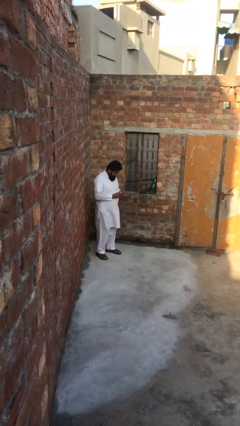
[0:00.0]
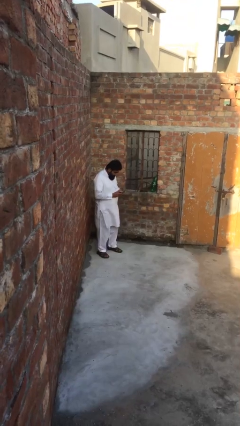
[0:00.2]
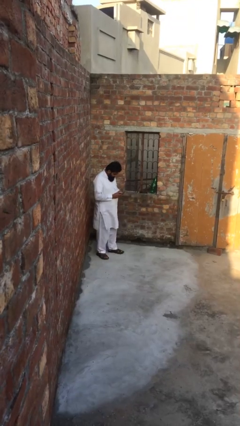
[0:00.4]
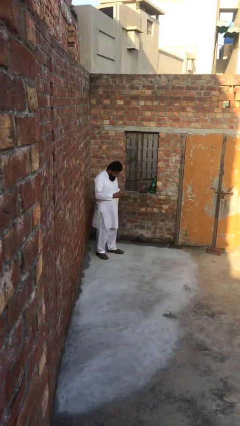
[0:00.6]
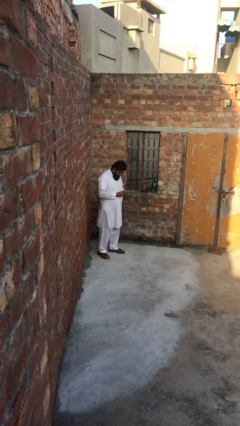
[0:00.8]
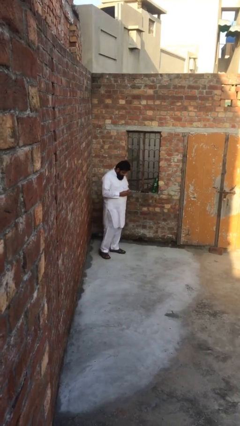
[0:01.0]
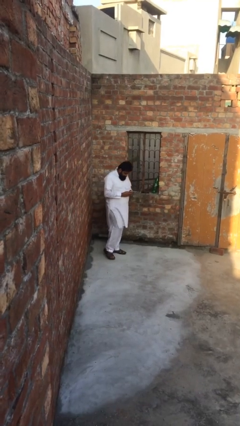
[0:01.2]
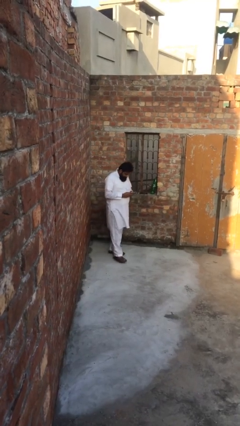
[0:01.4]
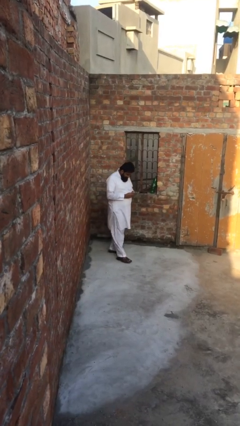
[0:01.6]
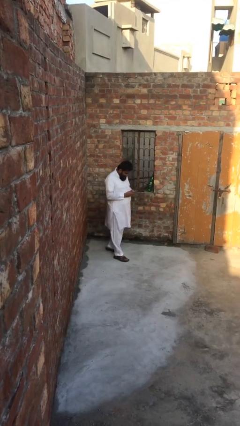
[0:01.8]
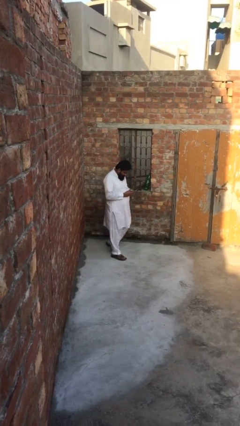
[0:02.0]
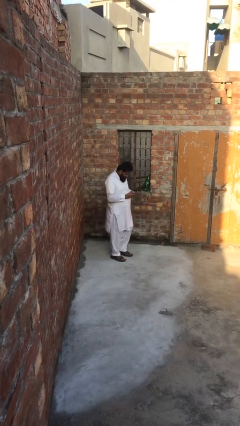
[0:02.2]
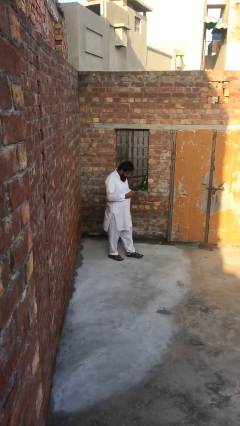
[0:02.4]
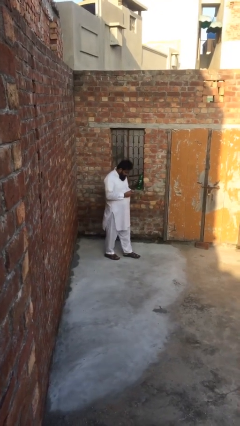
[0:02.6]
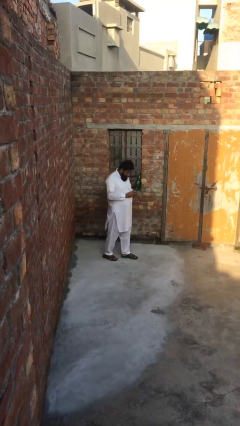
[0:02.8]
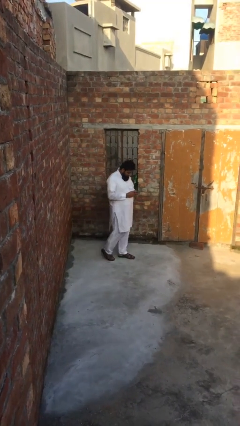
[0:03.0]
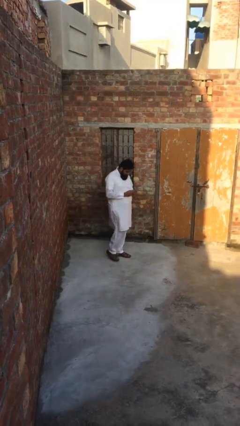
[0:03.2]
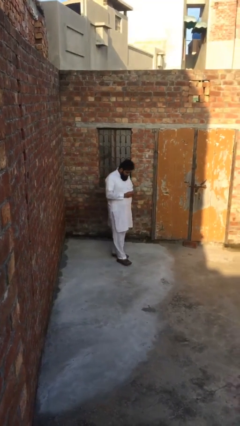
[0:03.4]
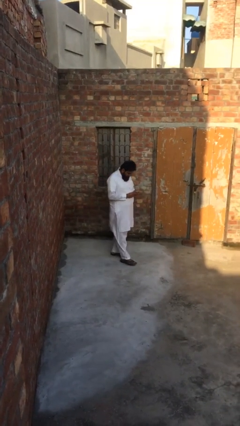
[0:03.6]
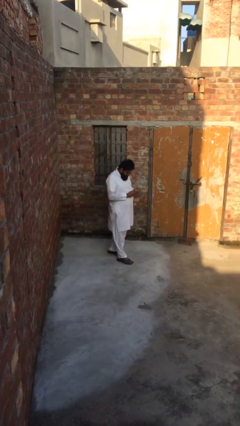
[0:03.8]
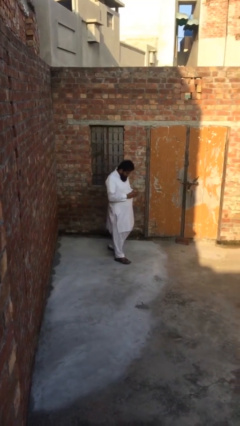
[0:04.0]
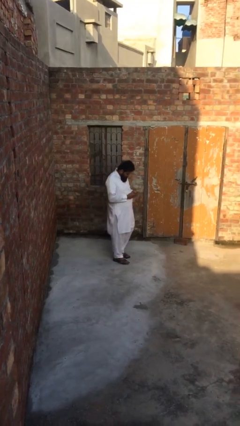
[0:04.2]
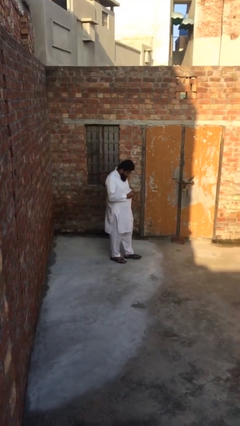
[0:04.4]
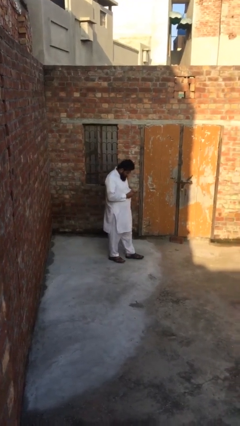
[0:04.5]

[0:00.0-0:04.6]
person texts on phone

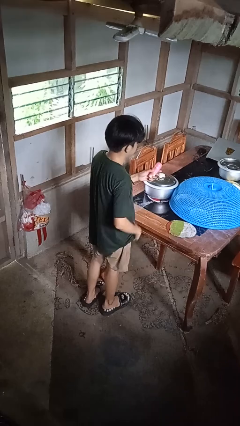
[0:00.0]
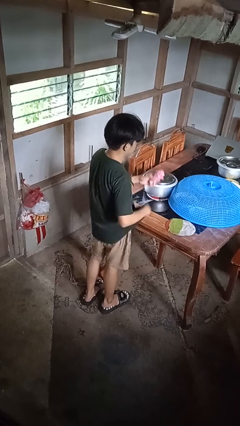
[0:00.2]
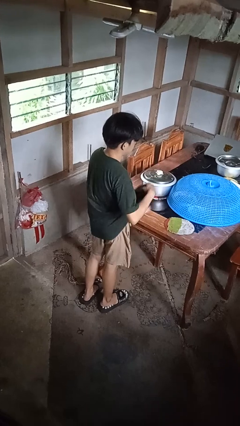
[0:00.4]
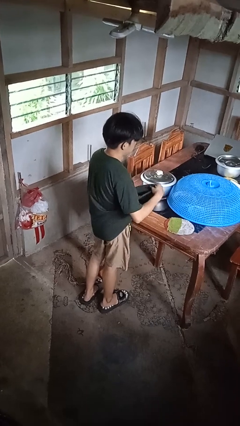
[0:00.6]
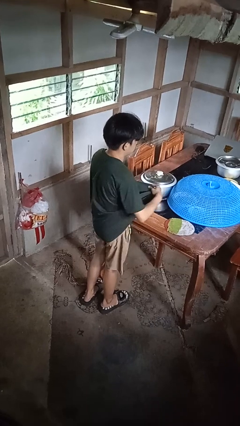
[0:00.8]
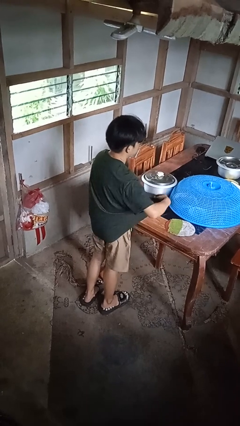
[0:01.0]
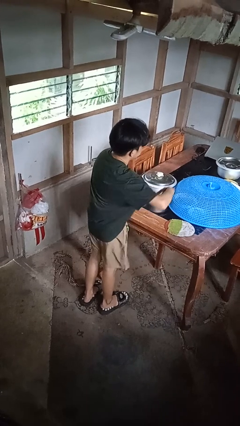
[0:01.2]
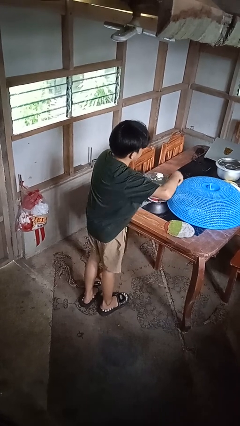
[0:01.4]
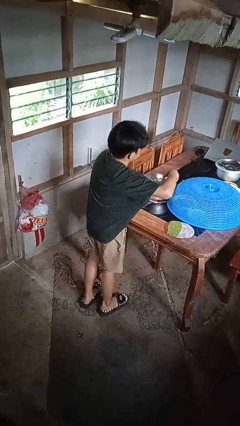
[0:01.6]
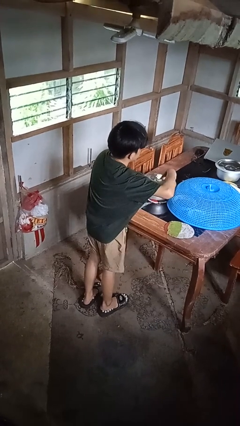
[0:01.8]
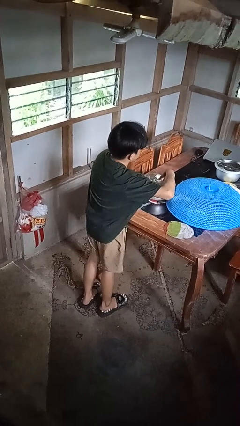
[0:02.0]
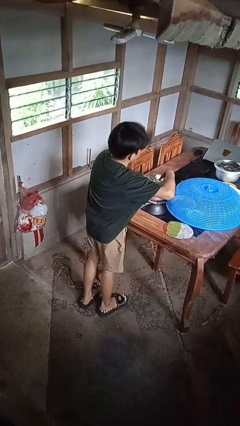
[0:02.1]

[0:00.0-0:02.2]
person applies deodorant

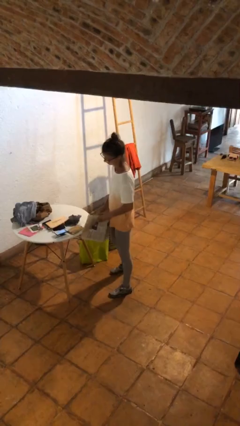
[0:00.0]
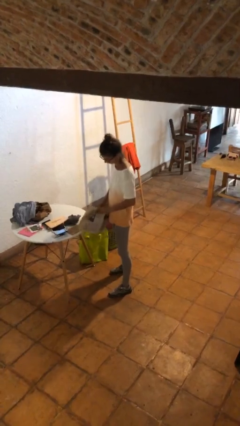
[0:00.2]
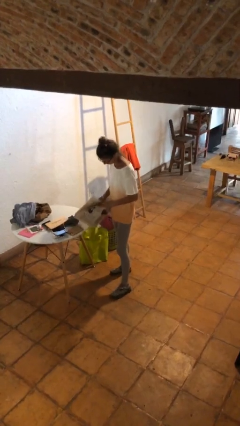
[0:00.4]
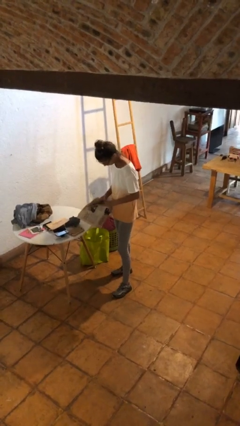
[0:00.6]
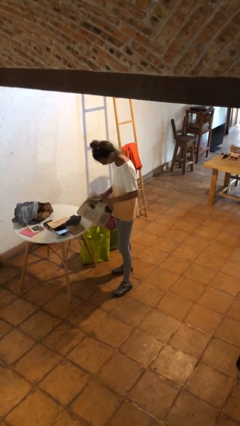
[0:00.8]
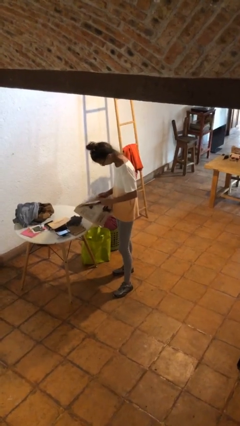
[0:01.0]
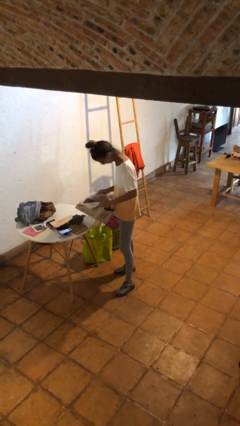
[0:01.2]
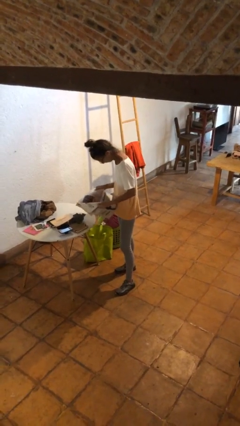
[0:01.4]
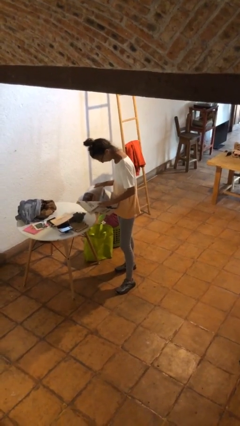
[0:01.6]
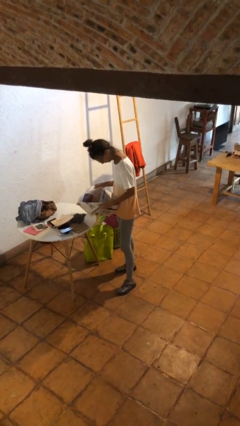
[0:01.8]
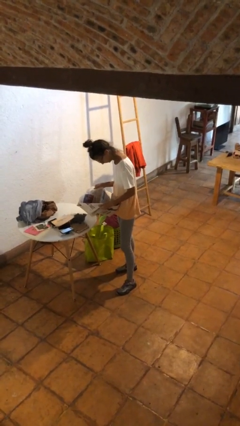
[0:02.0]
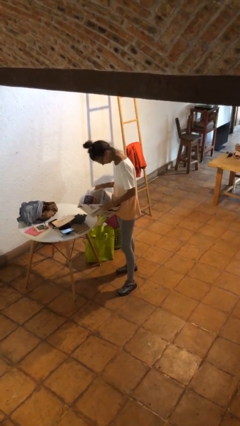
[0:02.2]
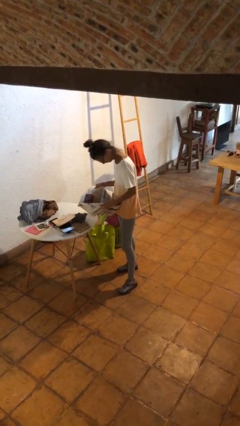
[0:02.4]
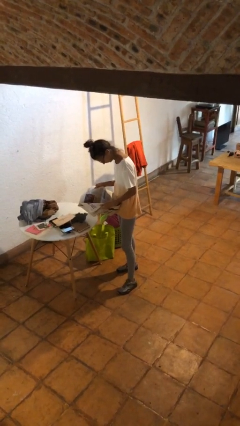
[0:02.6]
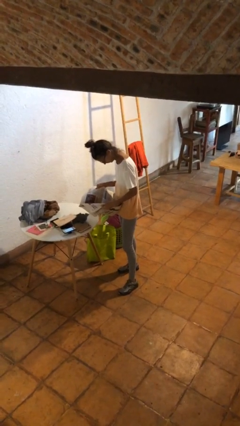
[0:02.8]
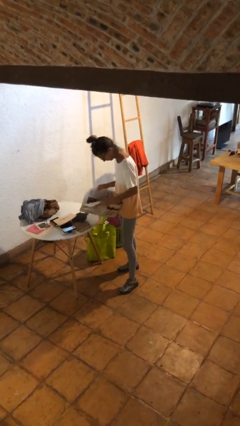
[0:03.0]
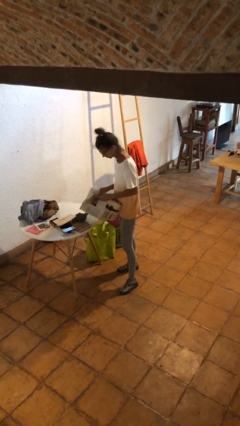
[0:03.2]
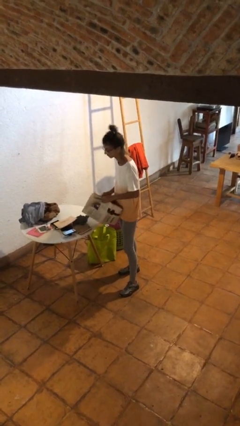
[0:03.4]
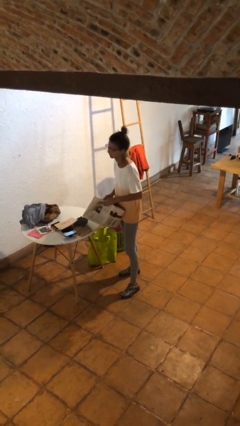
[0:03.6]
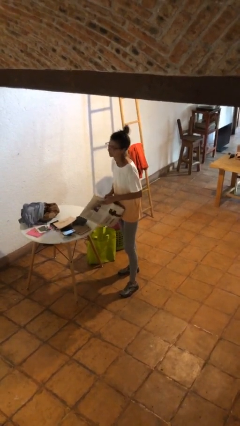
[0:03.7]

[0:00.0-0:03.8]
person reads newspaper

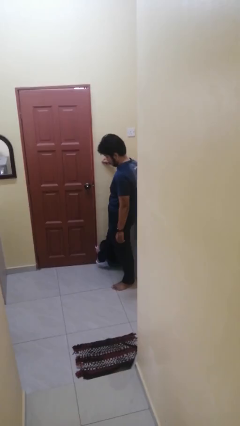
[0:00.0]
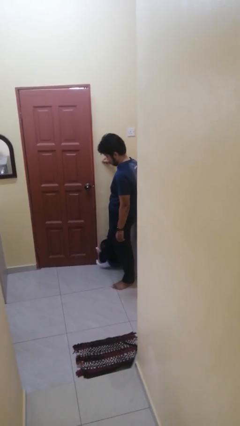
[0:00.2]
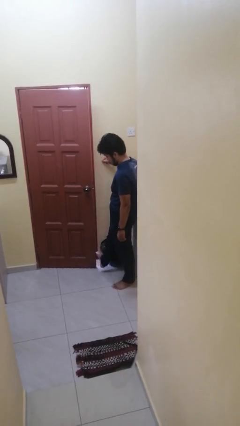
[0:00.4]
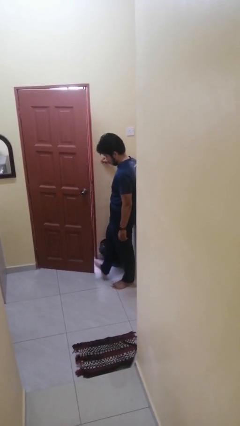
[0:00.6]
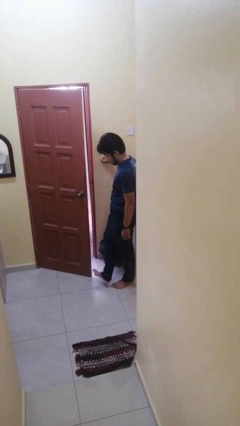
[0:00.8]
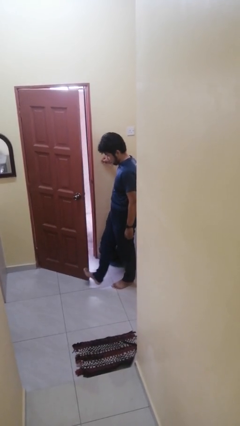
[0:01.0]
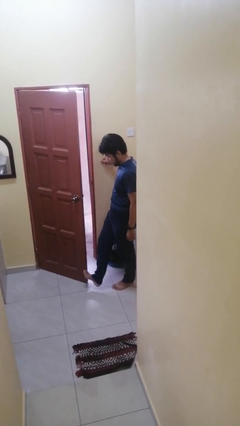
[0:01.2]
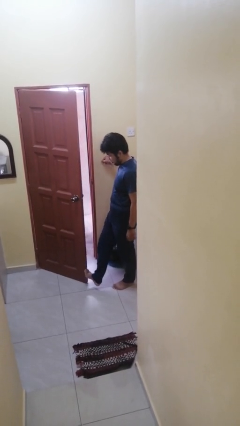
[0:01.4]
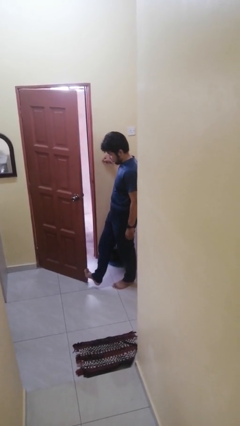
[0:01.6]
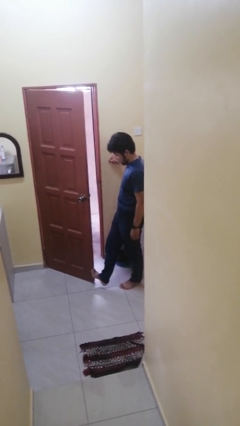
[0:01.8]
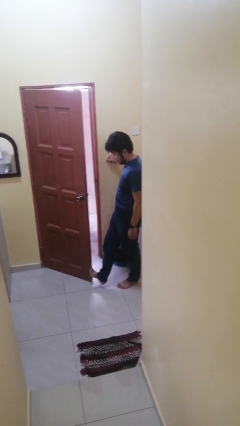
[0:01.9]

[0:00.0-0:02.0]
person opens facility door

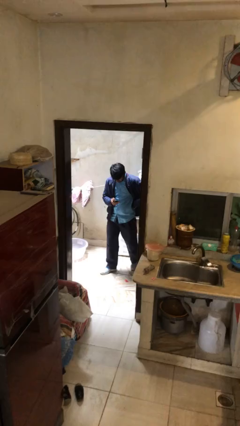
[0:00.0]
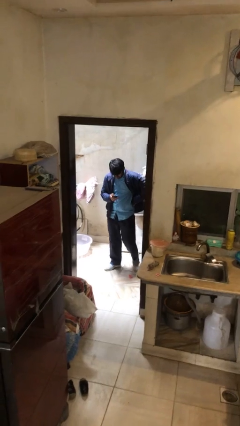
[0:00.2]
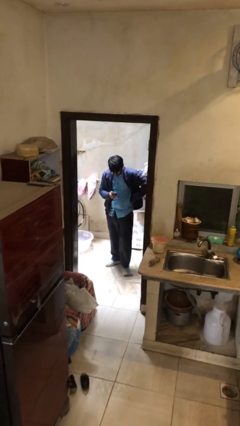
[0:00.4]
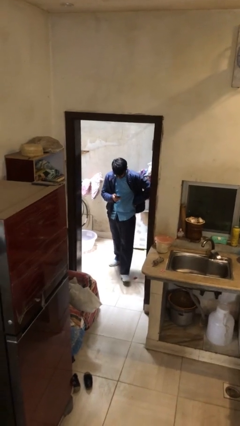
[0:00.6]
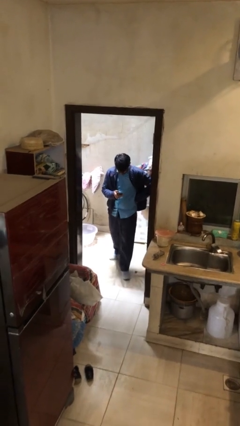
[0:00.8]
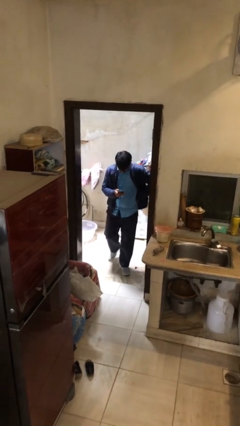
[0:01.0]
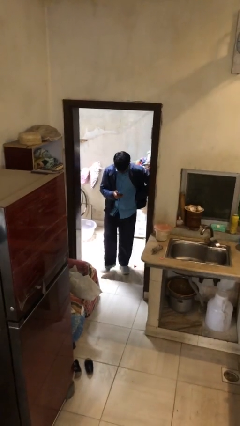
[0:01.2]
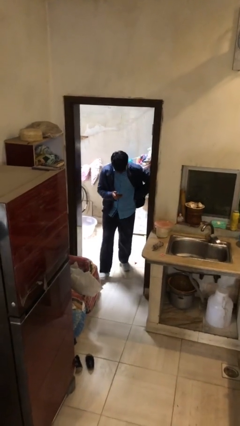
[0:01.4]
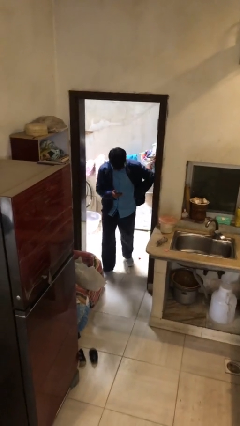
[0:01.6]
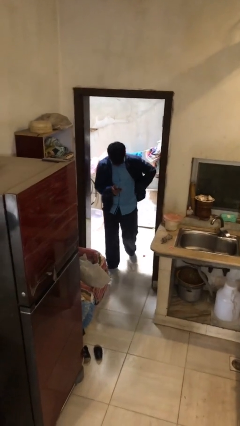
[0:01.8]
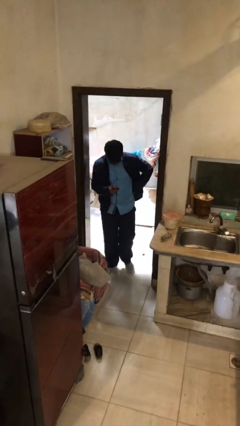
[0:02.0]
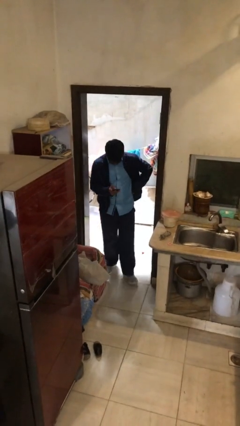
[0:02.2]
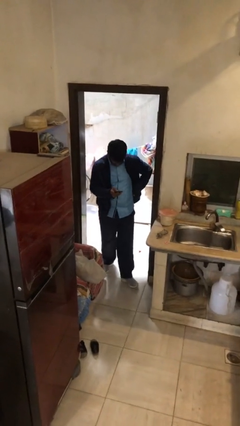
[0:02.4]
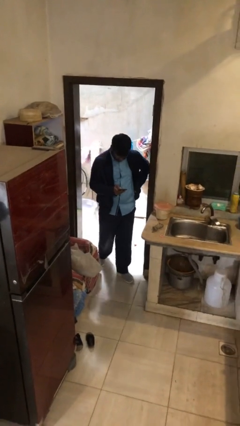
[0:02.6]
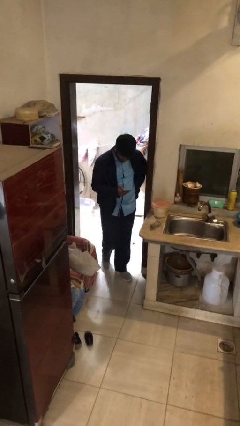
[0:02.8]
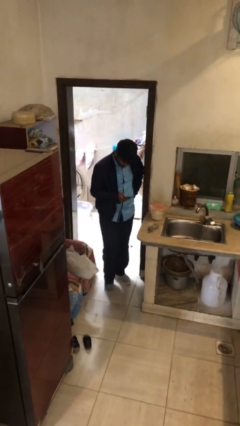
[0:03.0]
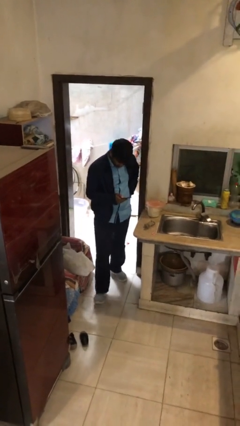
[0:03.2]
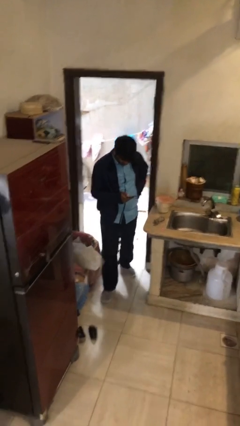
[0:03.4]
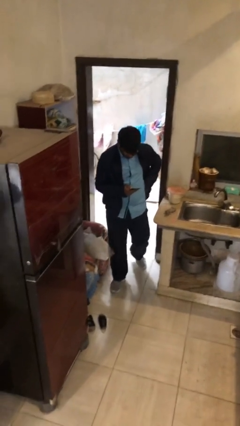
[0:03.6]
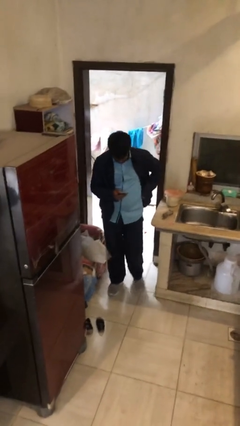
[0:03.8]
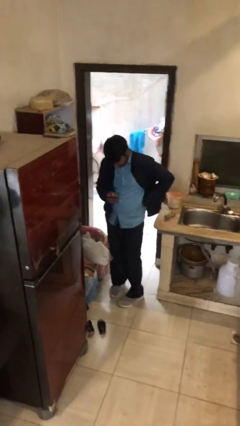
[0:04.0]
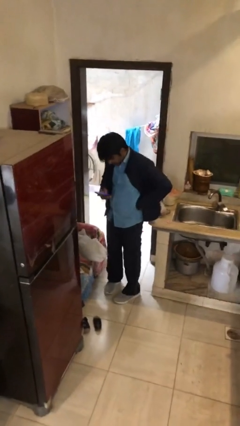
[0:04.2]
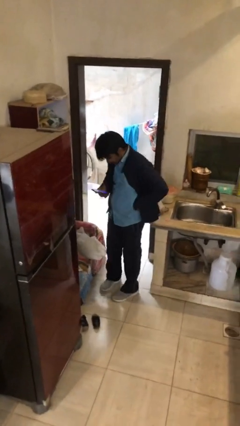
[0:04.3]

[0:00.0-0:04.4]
person enters scene through structure

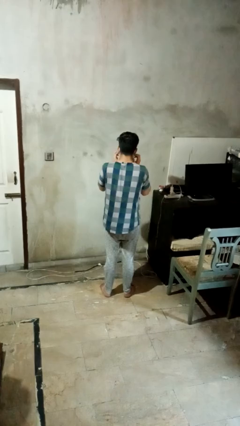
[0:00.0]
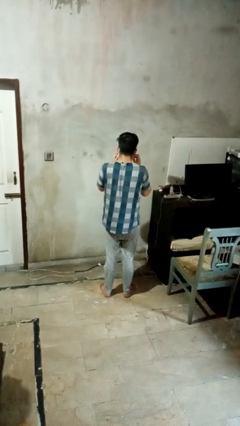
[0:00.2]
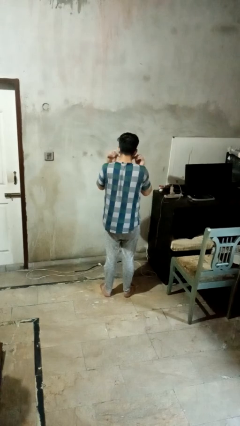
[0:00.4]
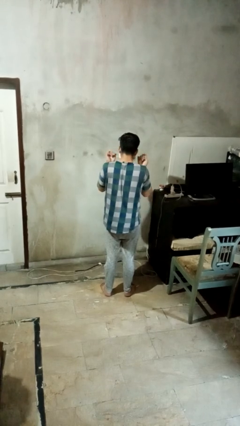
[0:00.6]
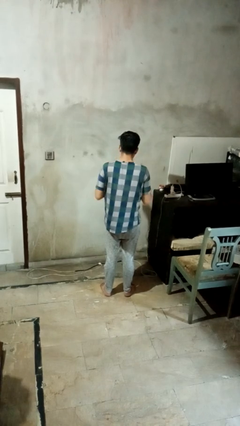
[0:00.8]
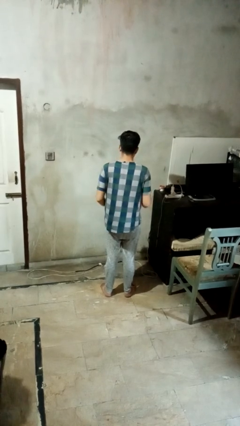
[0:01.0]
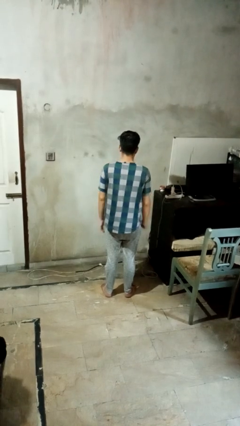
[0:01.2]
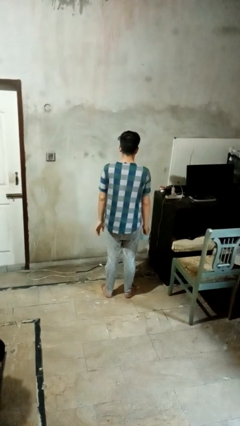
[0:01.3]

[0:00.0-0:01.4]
person takes off facemask
